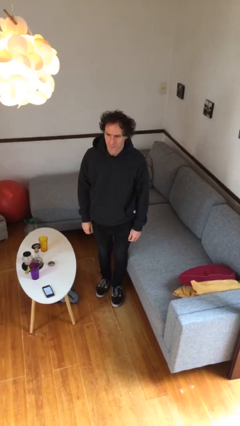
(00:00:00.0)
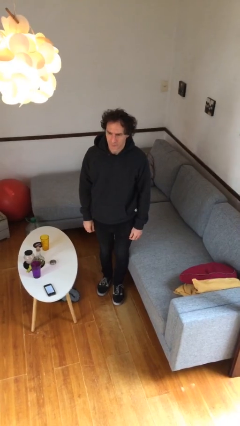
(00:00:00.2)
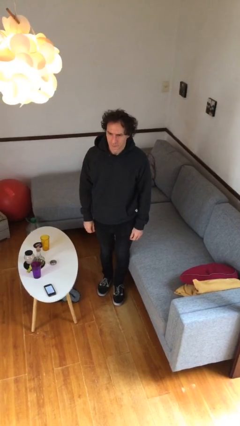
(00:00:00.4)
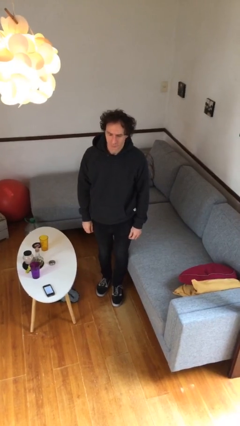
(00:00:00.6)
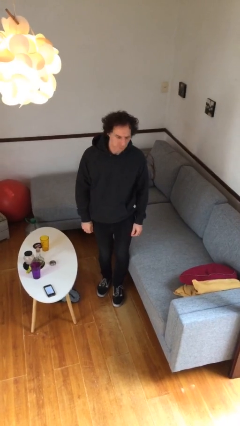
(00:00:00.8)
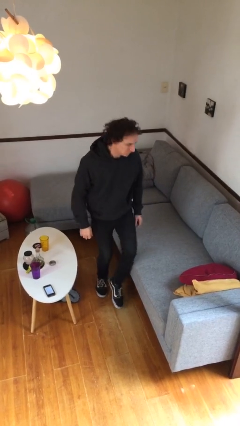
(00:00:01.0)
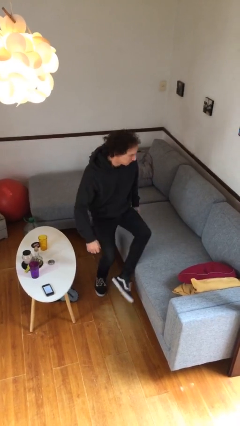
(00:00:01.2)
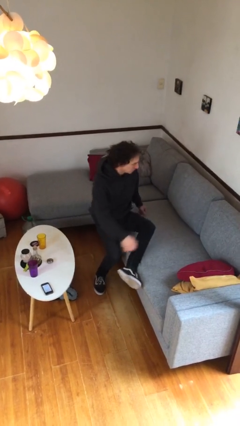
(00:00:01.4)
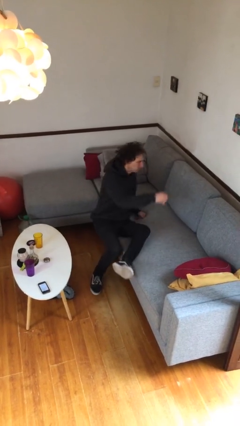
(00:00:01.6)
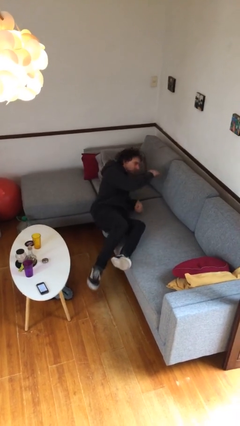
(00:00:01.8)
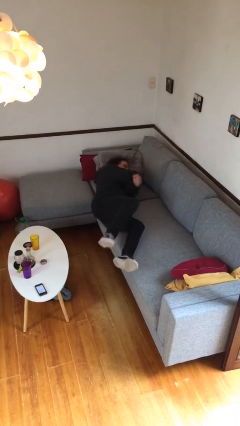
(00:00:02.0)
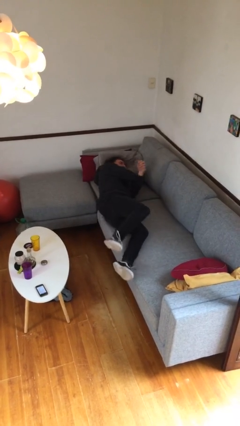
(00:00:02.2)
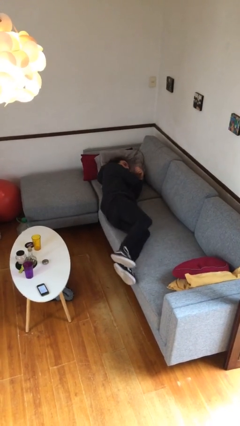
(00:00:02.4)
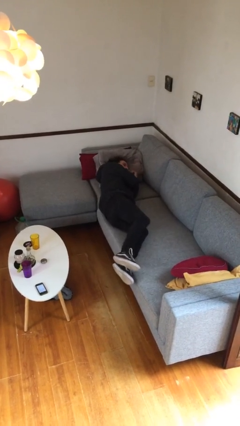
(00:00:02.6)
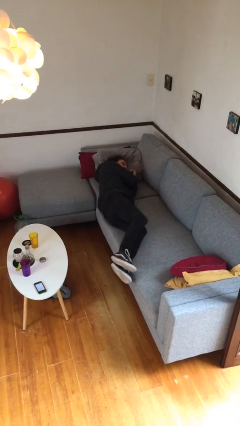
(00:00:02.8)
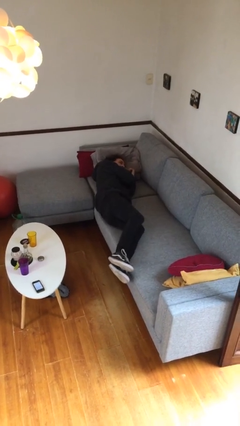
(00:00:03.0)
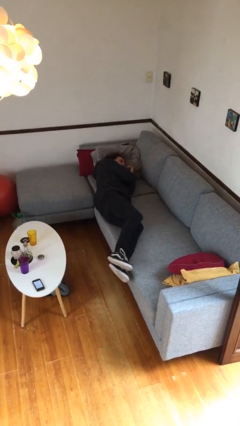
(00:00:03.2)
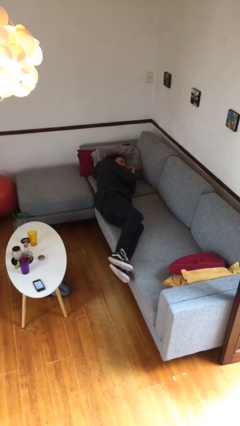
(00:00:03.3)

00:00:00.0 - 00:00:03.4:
person lies down on couch

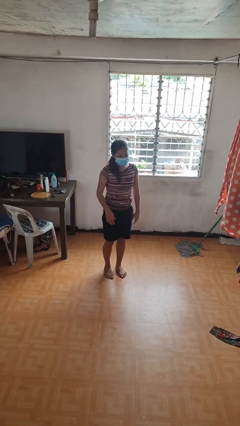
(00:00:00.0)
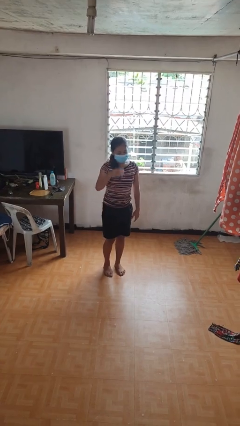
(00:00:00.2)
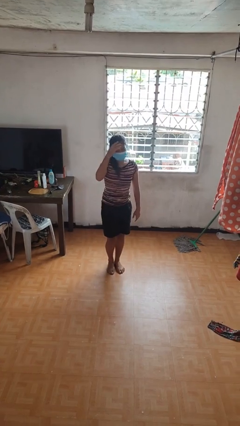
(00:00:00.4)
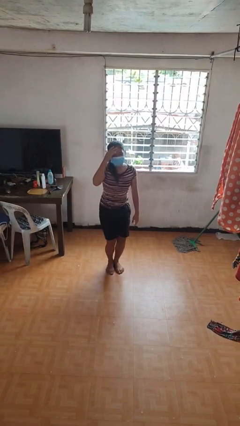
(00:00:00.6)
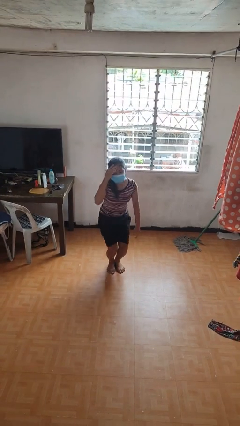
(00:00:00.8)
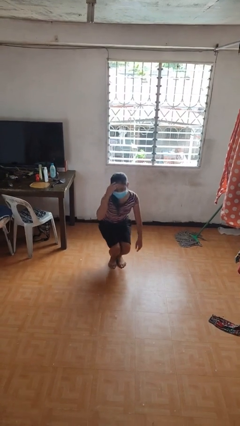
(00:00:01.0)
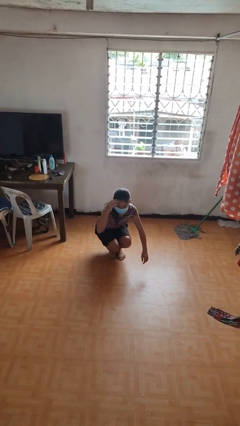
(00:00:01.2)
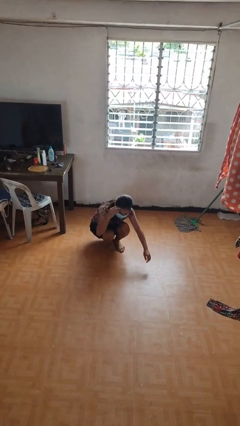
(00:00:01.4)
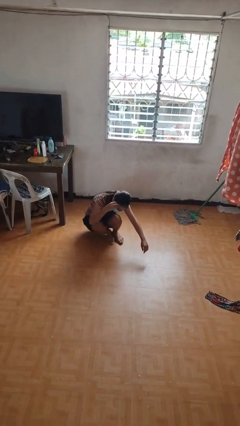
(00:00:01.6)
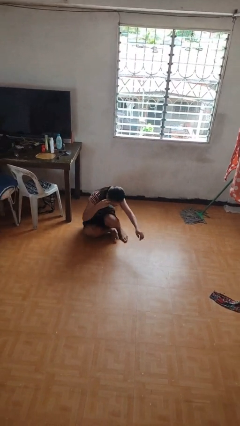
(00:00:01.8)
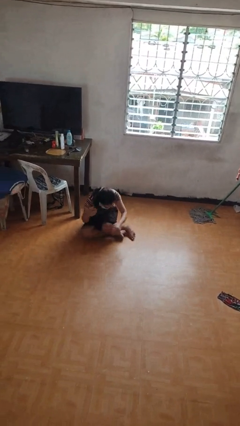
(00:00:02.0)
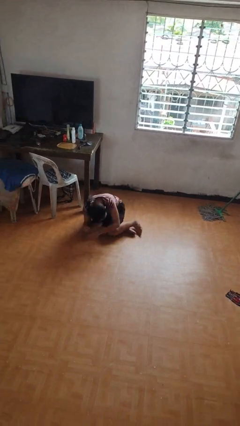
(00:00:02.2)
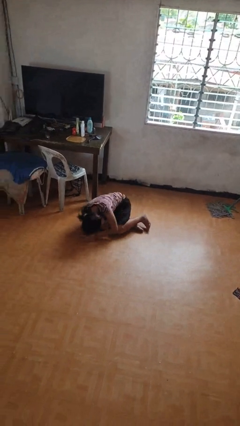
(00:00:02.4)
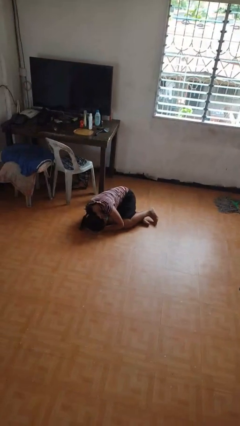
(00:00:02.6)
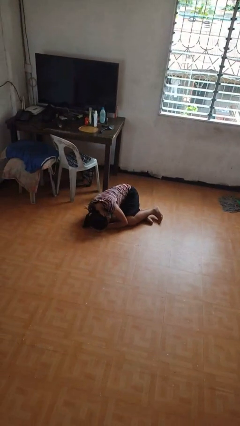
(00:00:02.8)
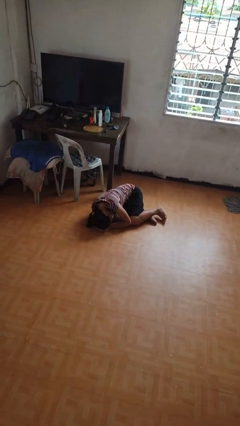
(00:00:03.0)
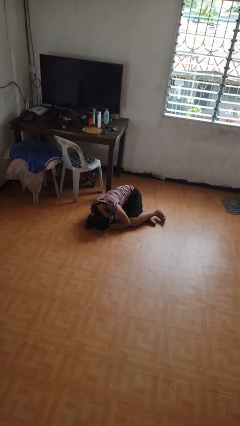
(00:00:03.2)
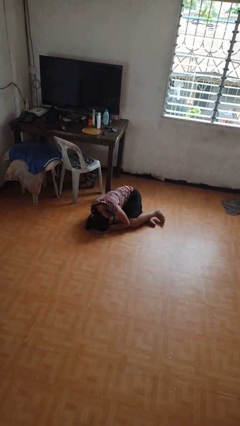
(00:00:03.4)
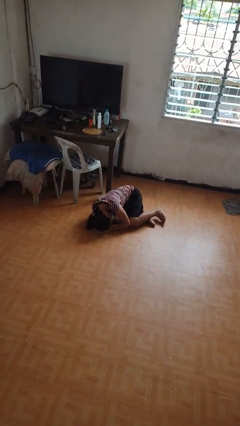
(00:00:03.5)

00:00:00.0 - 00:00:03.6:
person falls while standing

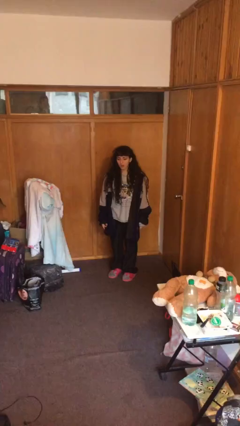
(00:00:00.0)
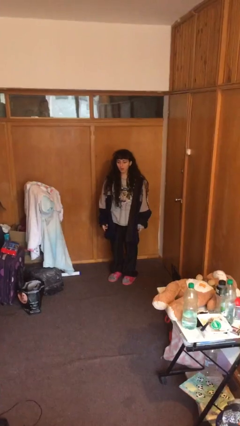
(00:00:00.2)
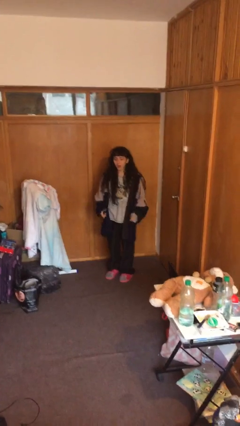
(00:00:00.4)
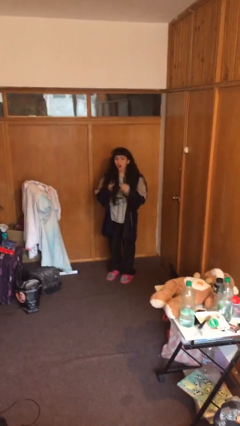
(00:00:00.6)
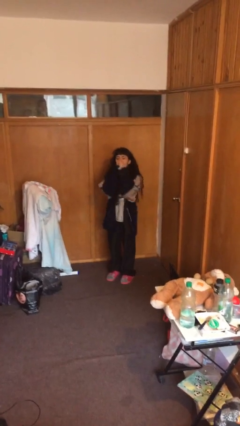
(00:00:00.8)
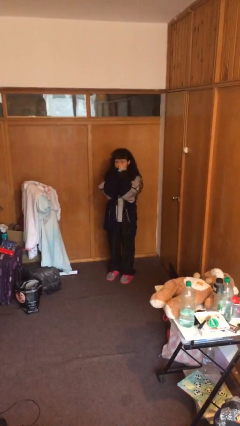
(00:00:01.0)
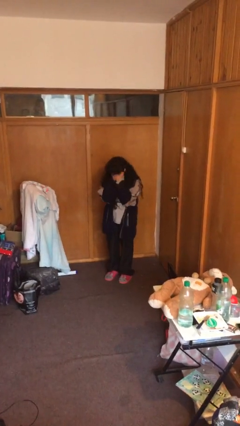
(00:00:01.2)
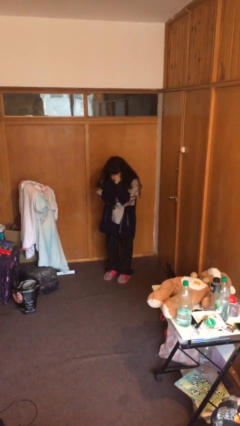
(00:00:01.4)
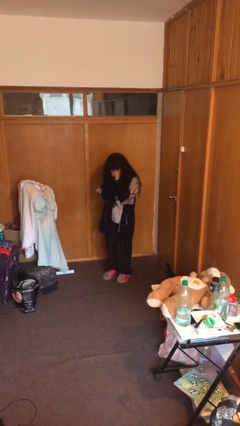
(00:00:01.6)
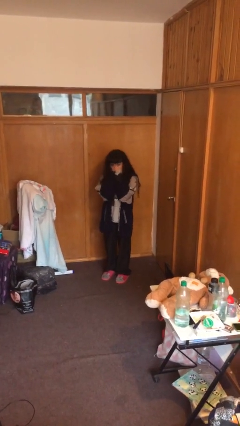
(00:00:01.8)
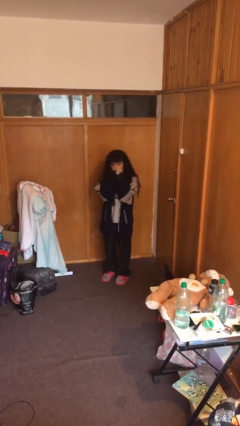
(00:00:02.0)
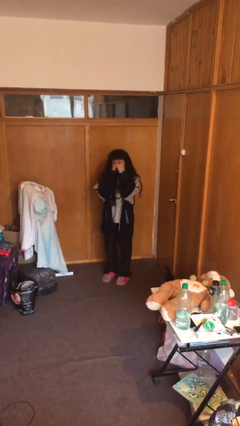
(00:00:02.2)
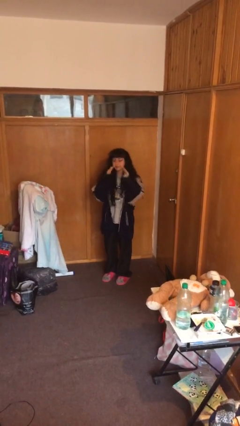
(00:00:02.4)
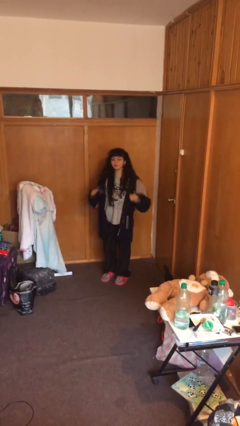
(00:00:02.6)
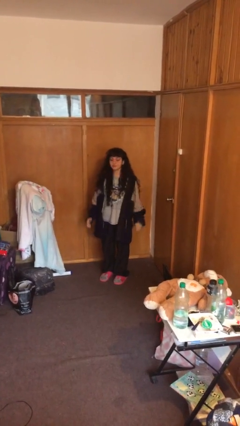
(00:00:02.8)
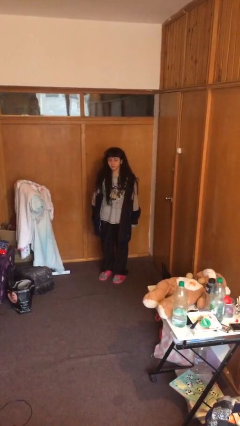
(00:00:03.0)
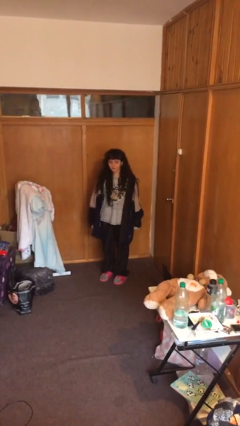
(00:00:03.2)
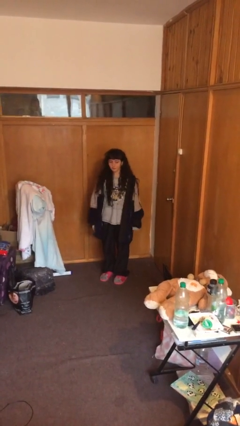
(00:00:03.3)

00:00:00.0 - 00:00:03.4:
person sneezes into hand

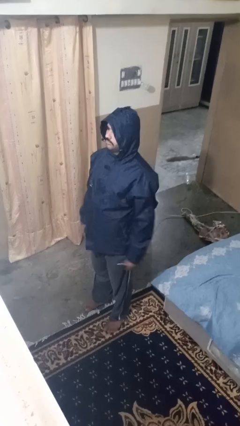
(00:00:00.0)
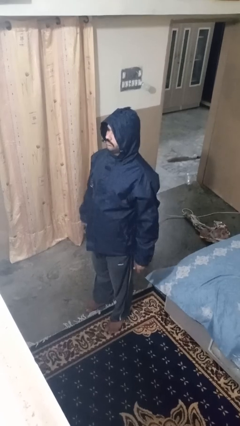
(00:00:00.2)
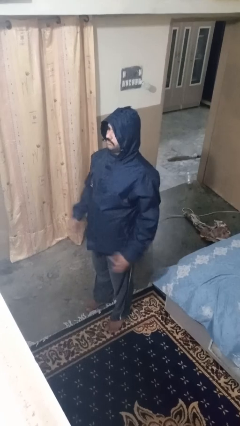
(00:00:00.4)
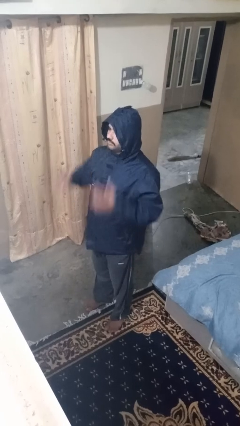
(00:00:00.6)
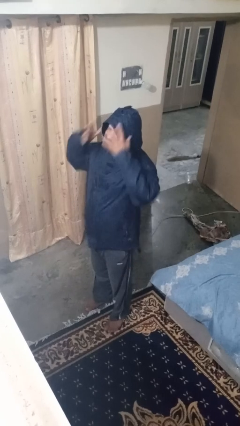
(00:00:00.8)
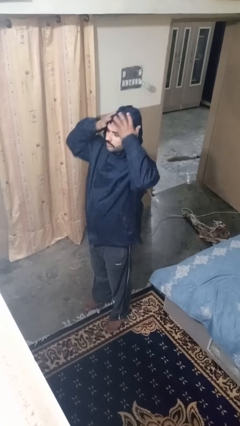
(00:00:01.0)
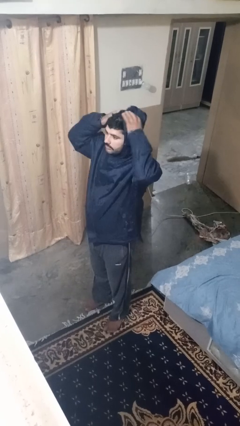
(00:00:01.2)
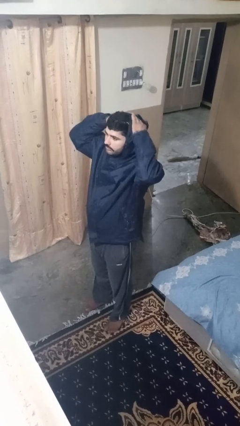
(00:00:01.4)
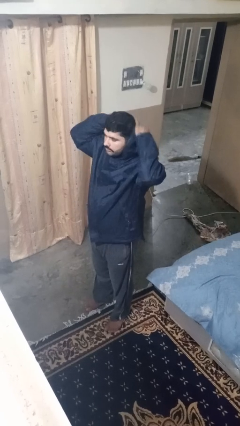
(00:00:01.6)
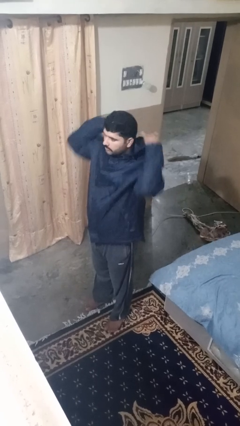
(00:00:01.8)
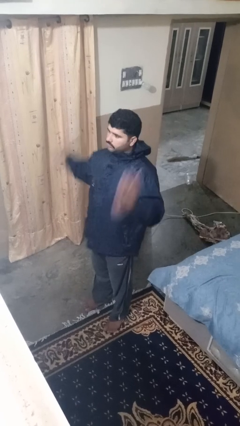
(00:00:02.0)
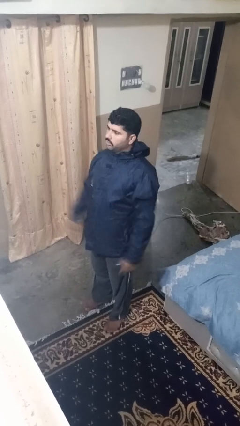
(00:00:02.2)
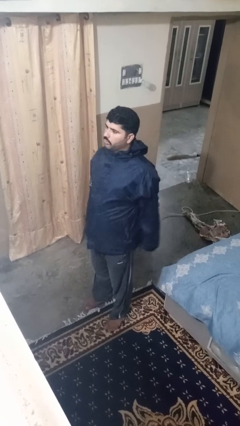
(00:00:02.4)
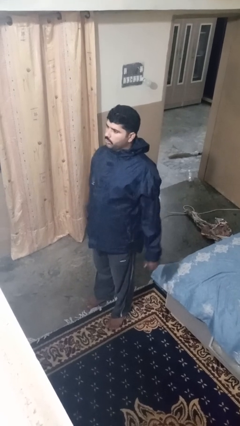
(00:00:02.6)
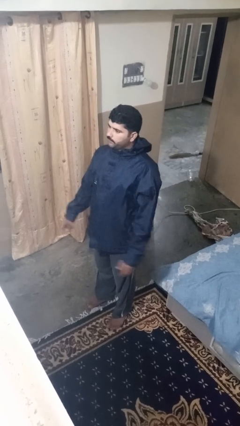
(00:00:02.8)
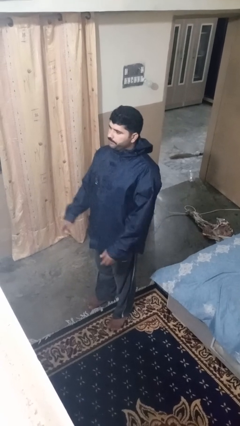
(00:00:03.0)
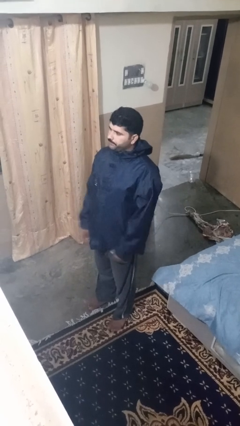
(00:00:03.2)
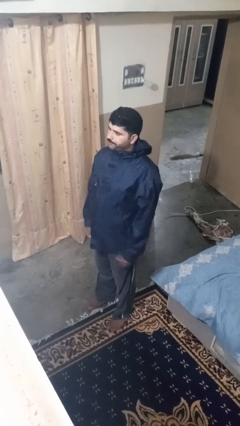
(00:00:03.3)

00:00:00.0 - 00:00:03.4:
person takes off hoodie

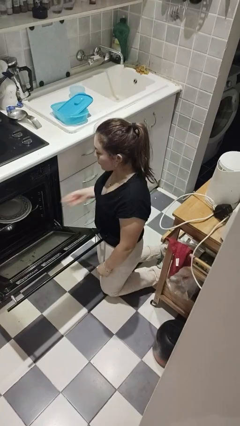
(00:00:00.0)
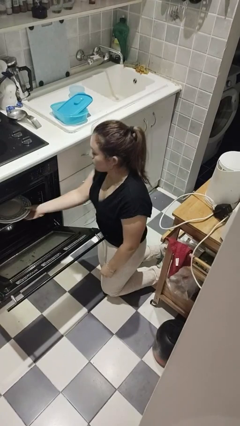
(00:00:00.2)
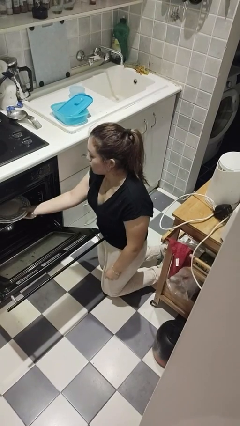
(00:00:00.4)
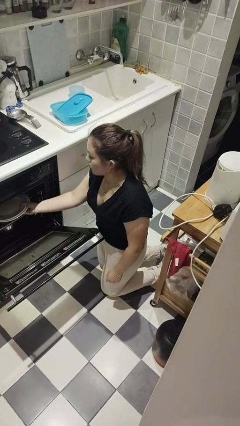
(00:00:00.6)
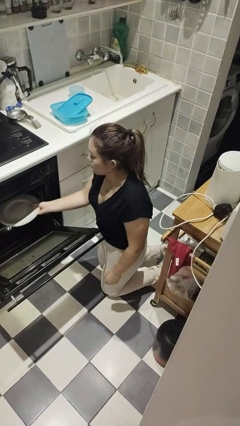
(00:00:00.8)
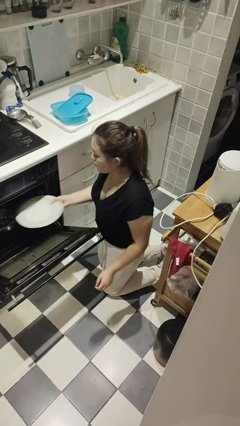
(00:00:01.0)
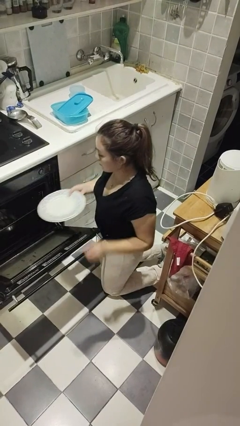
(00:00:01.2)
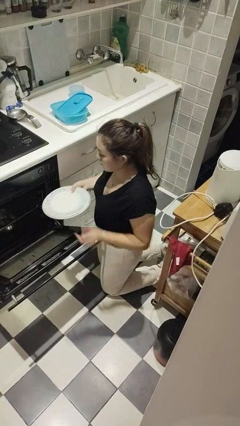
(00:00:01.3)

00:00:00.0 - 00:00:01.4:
person unloads dishwasher

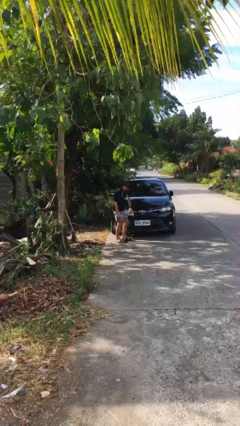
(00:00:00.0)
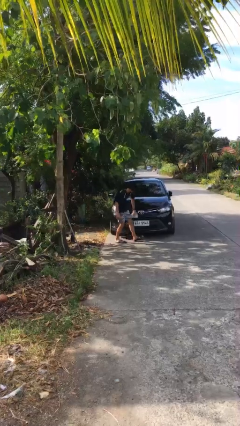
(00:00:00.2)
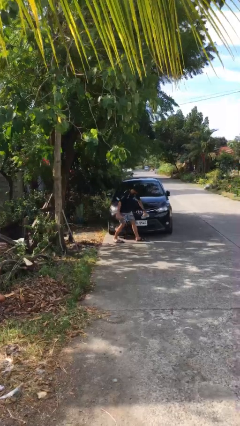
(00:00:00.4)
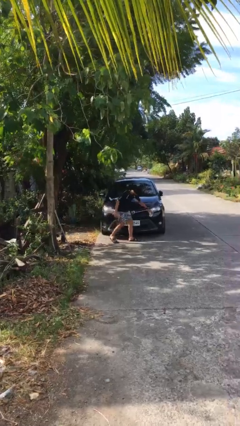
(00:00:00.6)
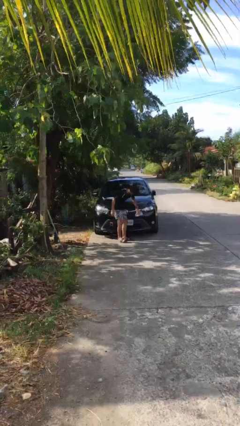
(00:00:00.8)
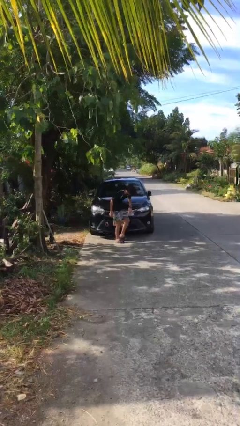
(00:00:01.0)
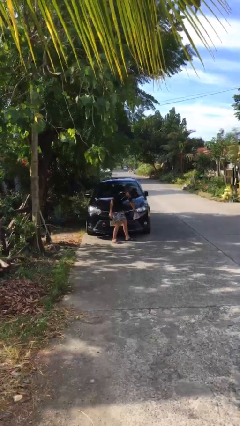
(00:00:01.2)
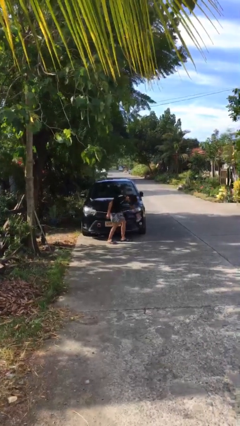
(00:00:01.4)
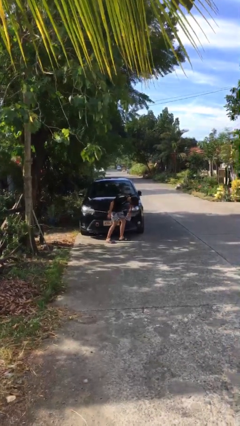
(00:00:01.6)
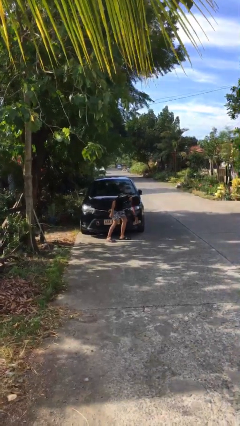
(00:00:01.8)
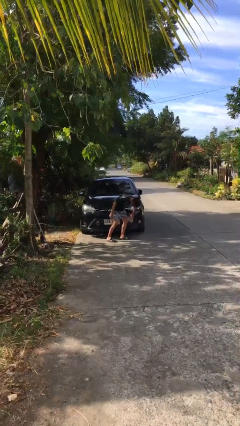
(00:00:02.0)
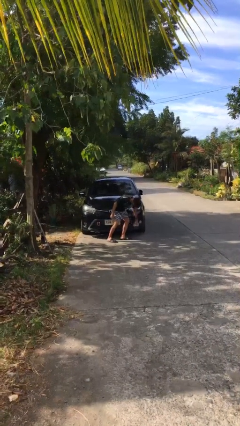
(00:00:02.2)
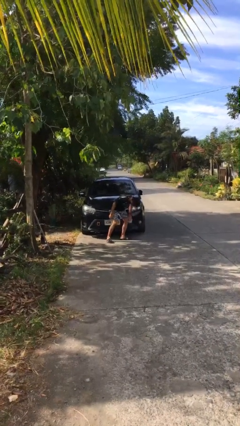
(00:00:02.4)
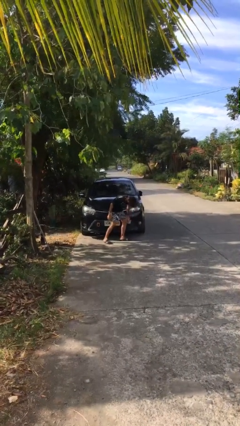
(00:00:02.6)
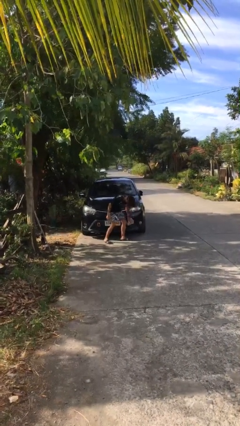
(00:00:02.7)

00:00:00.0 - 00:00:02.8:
person polishes car with rag
